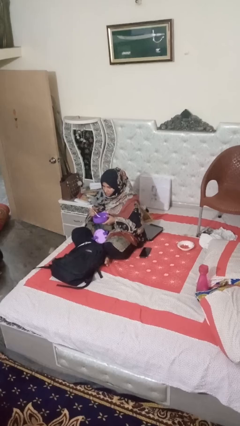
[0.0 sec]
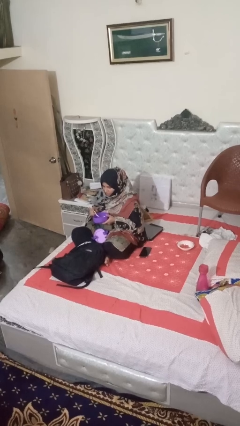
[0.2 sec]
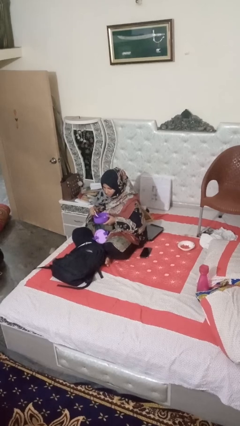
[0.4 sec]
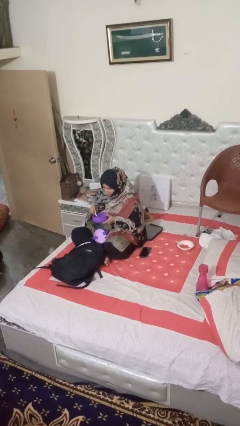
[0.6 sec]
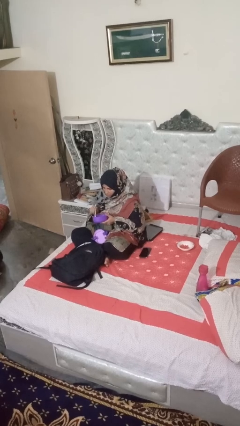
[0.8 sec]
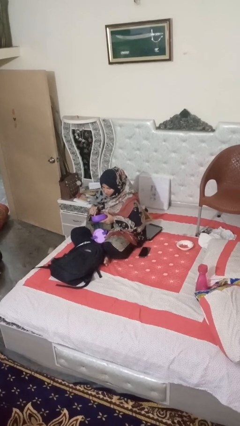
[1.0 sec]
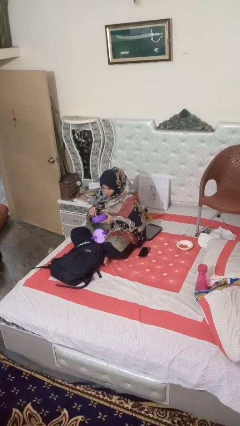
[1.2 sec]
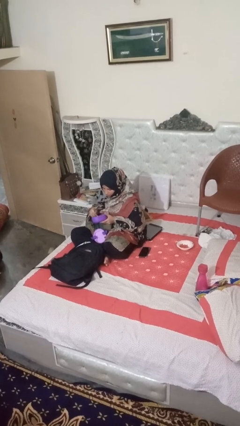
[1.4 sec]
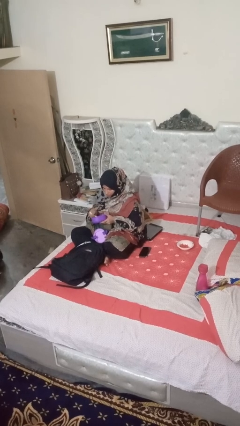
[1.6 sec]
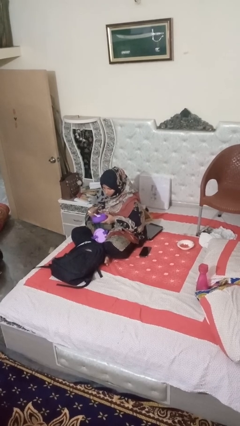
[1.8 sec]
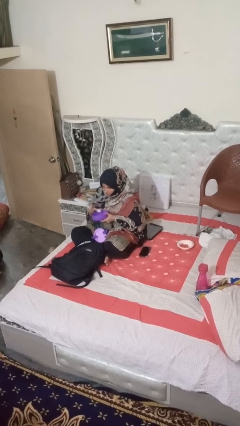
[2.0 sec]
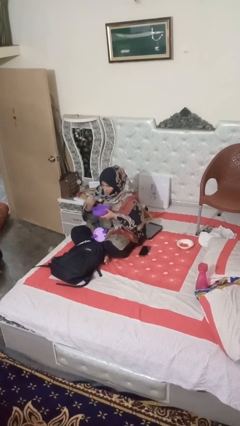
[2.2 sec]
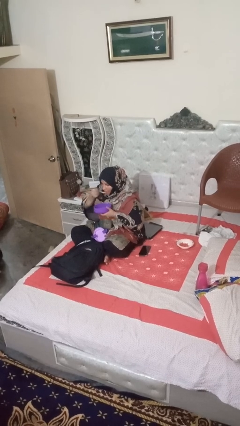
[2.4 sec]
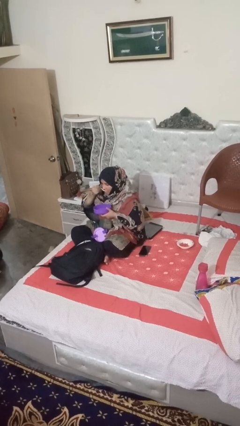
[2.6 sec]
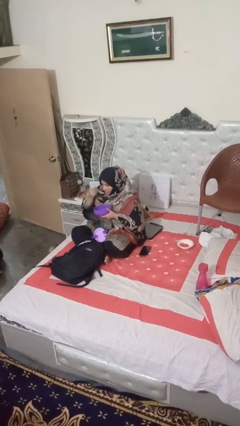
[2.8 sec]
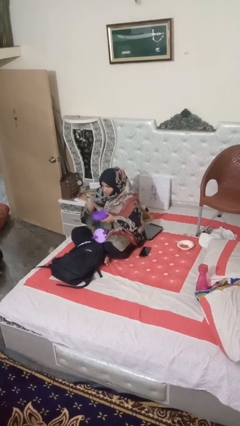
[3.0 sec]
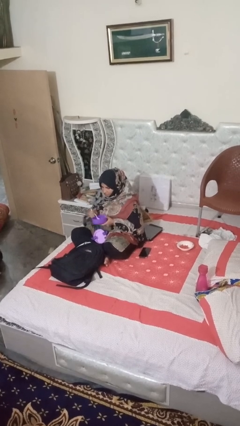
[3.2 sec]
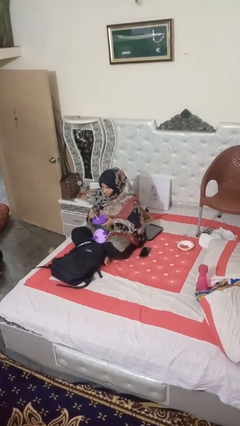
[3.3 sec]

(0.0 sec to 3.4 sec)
person eats snack from bag

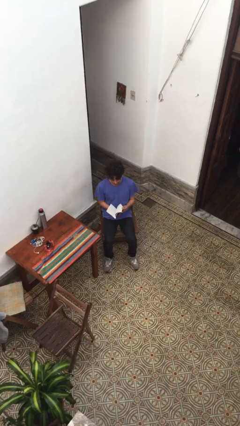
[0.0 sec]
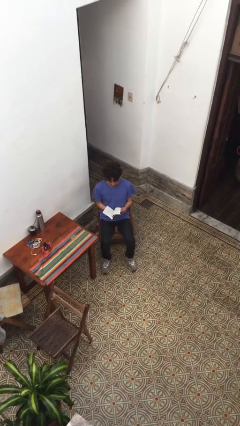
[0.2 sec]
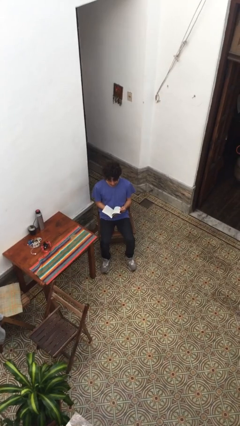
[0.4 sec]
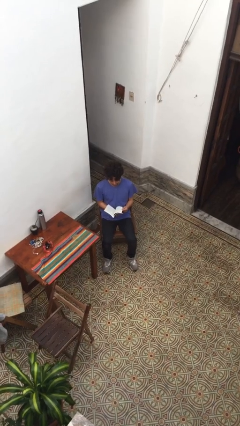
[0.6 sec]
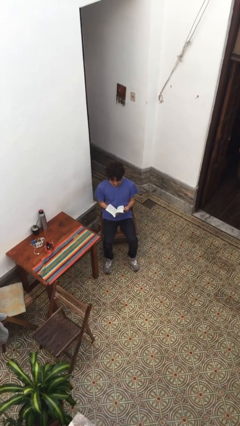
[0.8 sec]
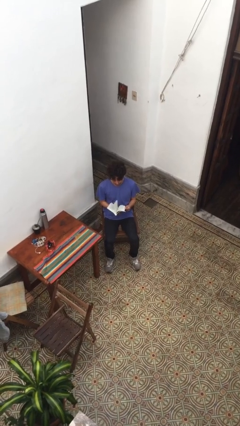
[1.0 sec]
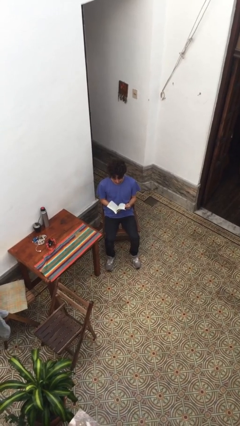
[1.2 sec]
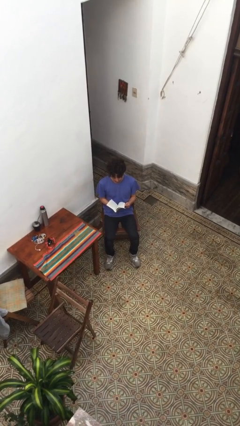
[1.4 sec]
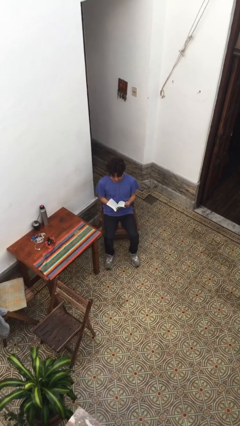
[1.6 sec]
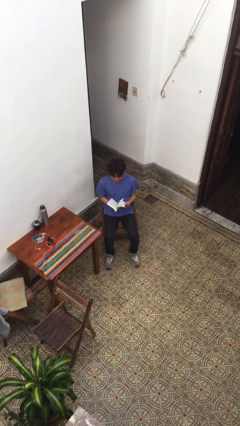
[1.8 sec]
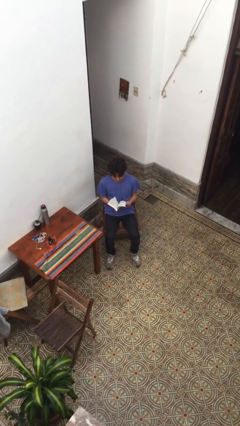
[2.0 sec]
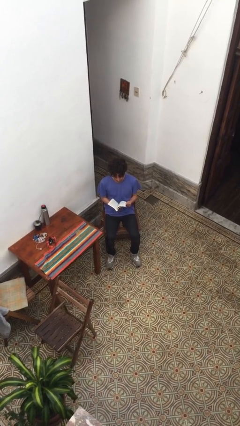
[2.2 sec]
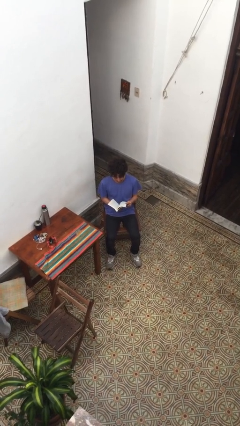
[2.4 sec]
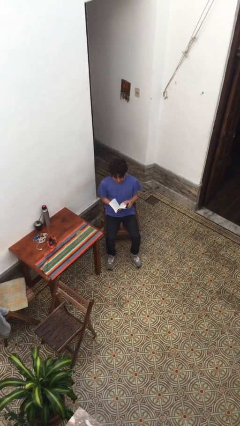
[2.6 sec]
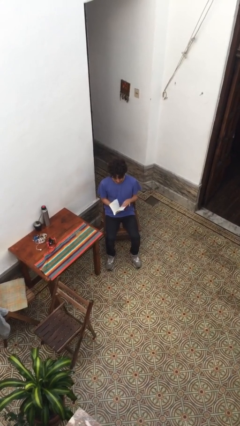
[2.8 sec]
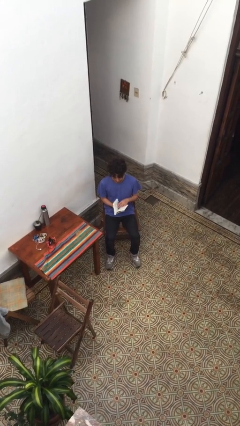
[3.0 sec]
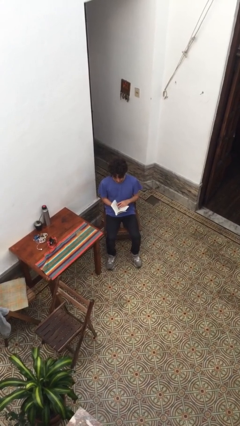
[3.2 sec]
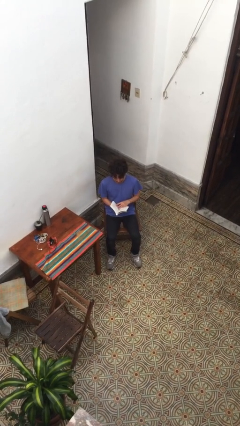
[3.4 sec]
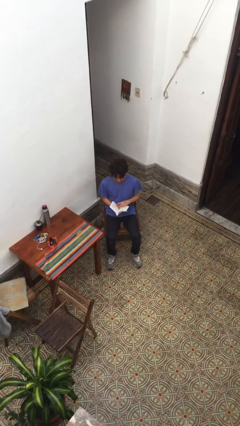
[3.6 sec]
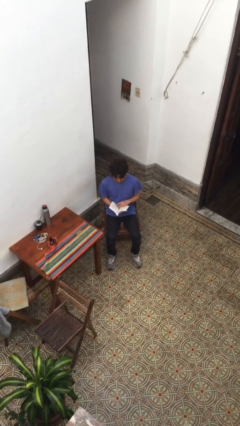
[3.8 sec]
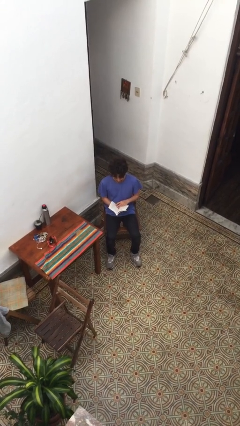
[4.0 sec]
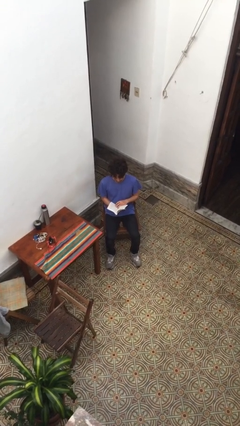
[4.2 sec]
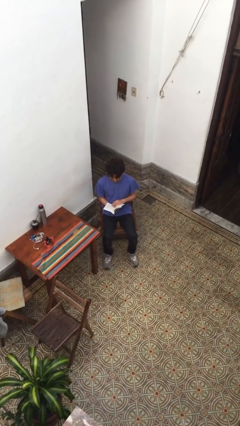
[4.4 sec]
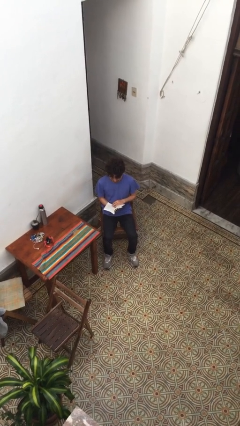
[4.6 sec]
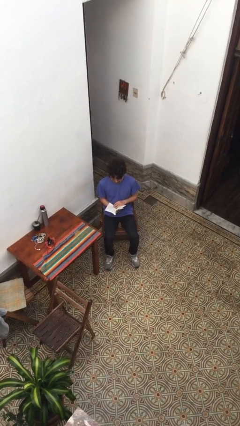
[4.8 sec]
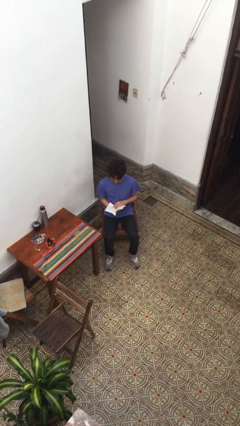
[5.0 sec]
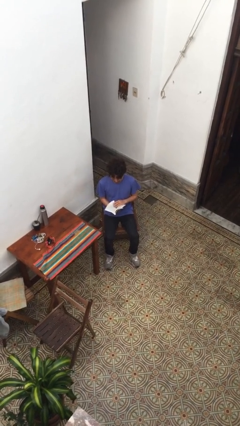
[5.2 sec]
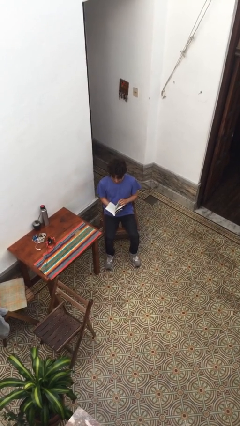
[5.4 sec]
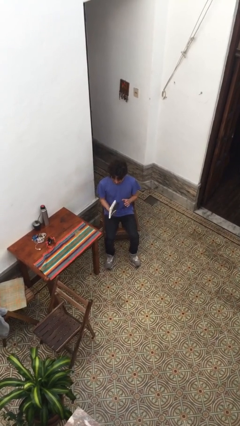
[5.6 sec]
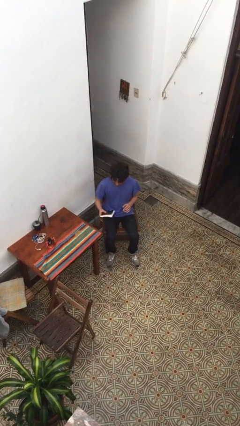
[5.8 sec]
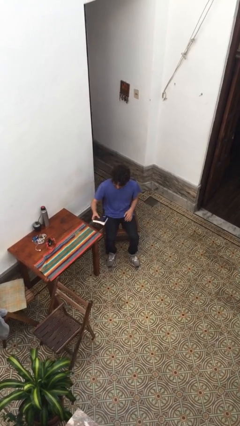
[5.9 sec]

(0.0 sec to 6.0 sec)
person reads document

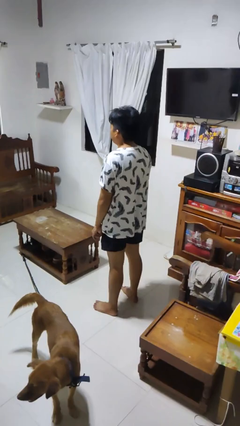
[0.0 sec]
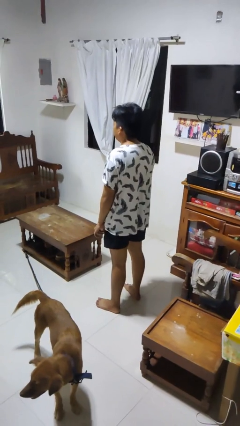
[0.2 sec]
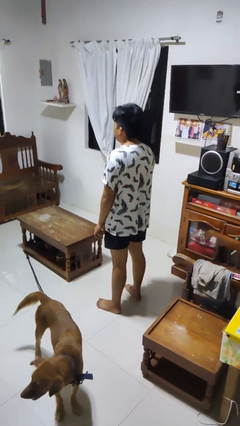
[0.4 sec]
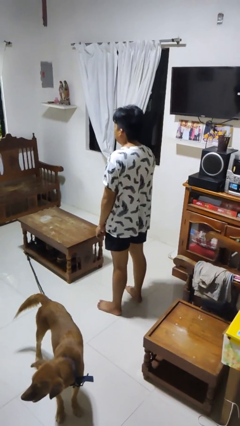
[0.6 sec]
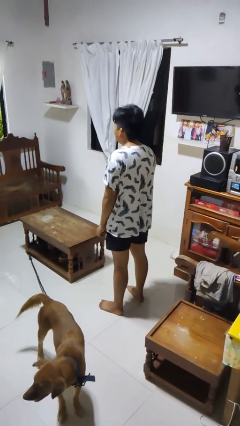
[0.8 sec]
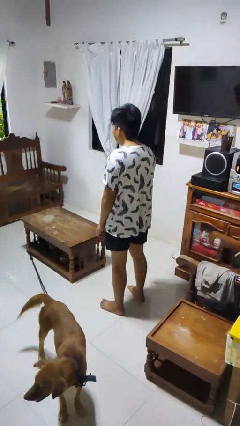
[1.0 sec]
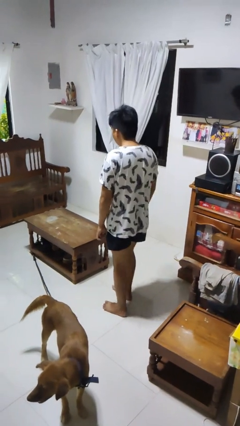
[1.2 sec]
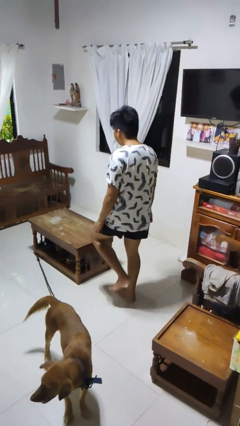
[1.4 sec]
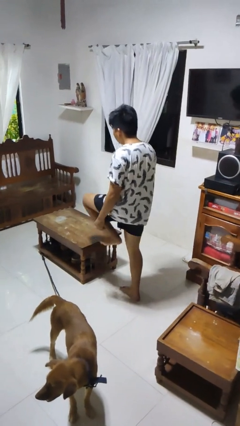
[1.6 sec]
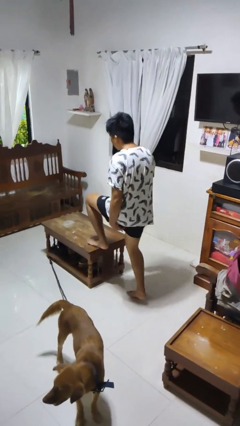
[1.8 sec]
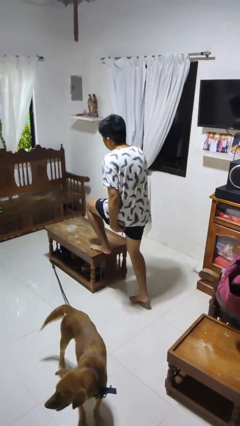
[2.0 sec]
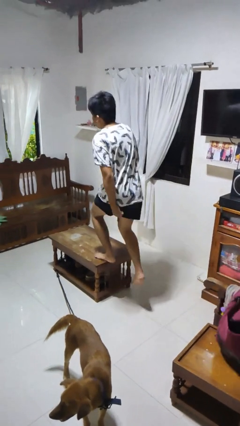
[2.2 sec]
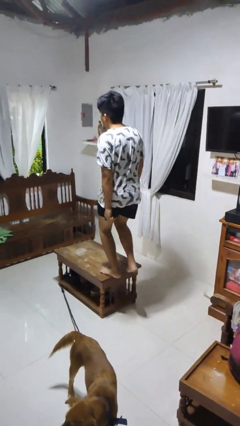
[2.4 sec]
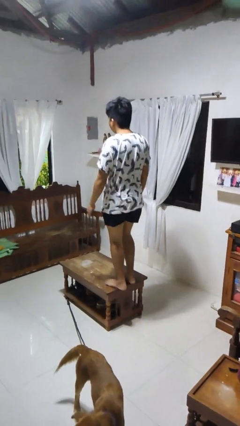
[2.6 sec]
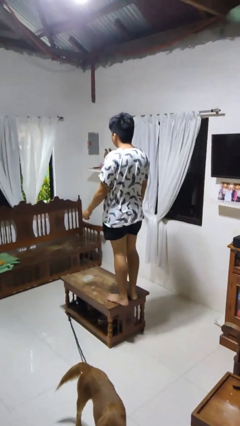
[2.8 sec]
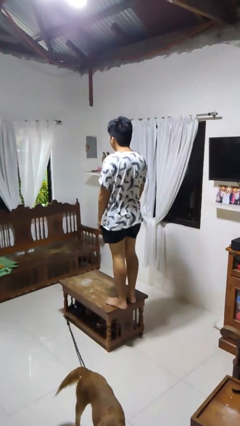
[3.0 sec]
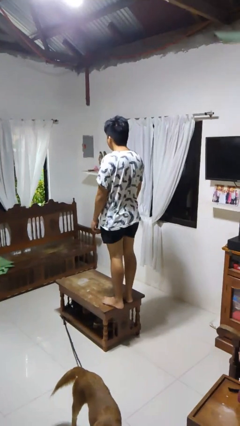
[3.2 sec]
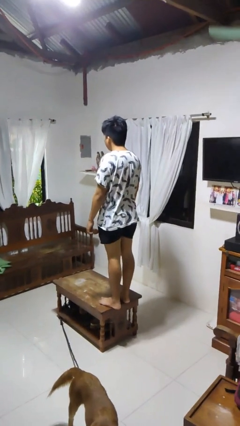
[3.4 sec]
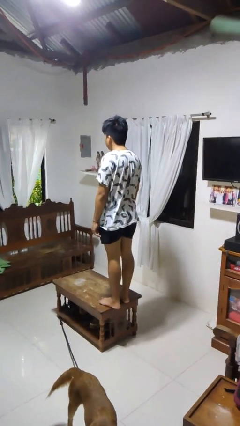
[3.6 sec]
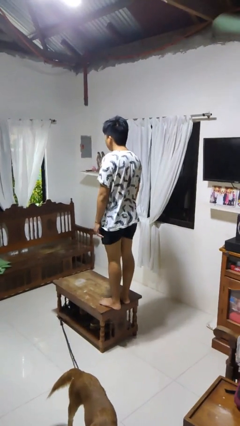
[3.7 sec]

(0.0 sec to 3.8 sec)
person climbs on table

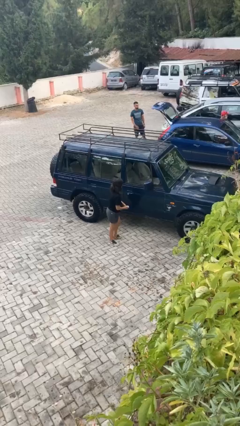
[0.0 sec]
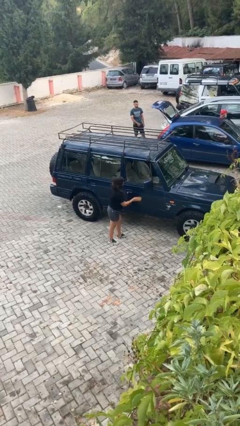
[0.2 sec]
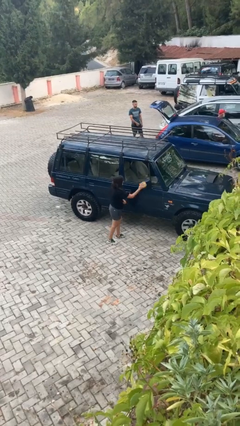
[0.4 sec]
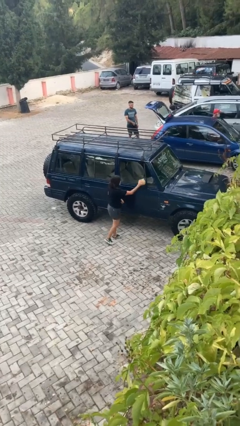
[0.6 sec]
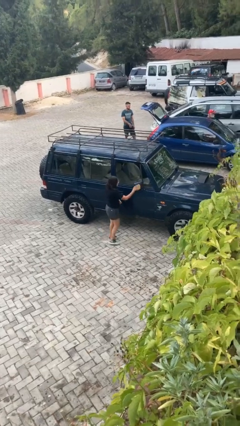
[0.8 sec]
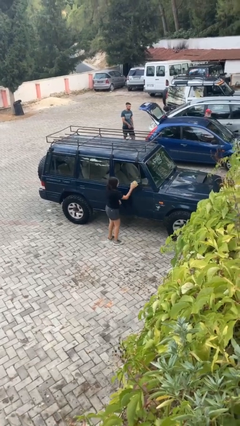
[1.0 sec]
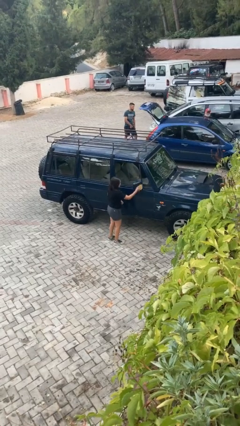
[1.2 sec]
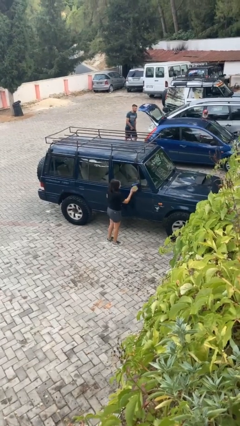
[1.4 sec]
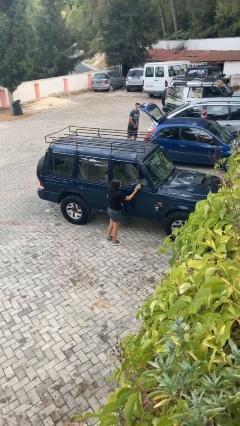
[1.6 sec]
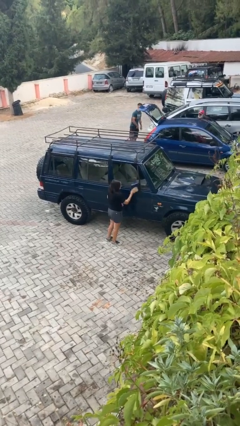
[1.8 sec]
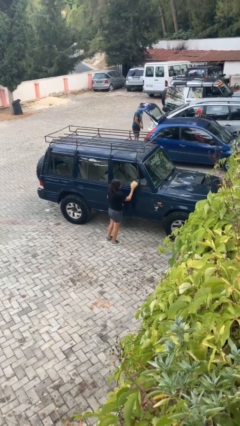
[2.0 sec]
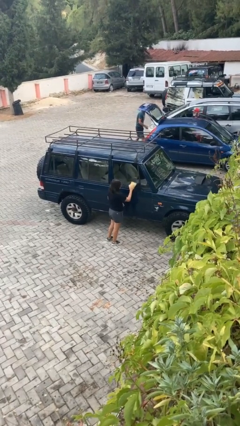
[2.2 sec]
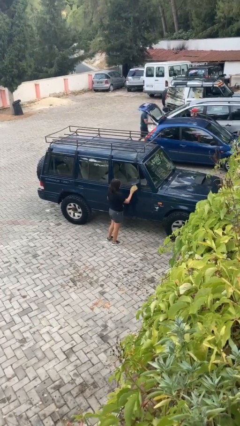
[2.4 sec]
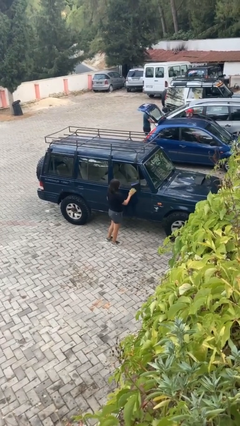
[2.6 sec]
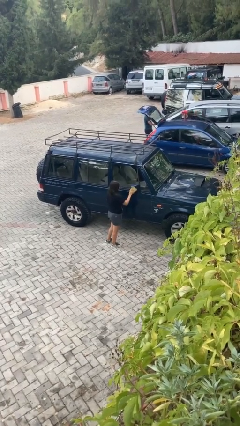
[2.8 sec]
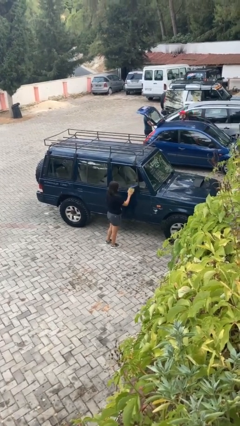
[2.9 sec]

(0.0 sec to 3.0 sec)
person polishes car with rag

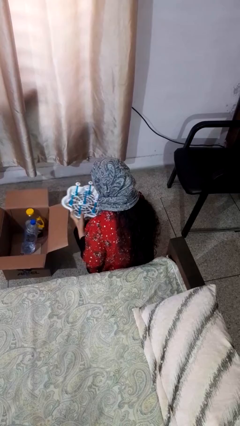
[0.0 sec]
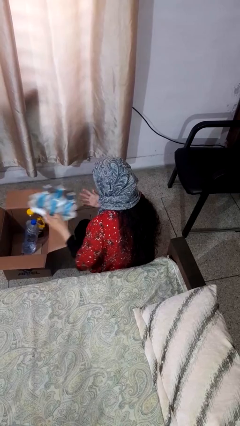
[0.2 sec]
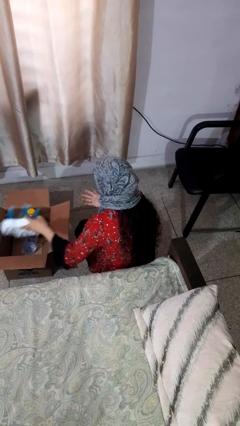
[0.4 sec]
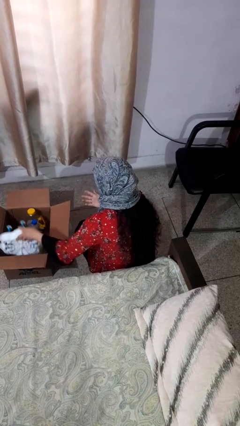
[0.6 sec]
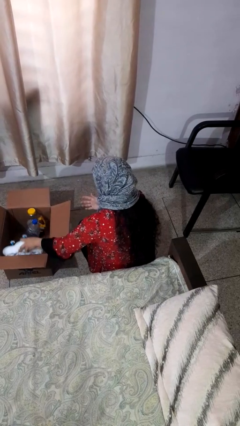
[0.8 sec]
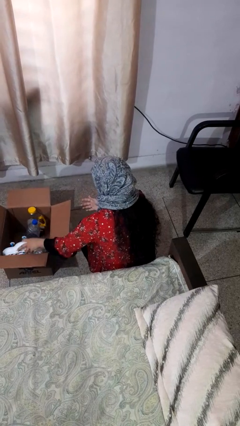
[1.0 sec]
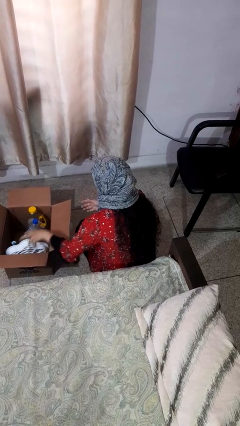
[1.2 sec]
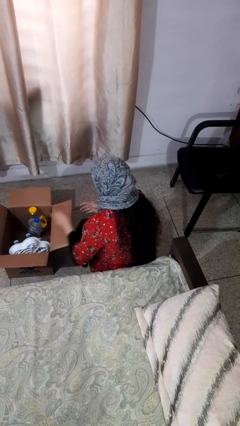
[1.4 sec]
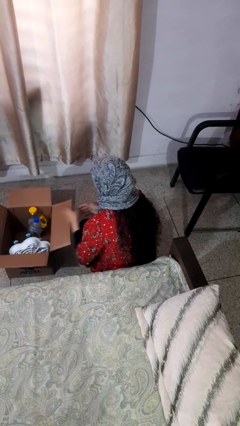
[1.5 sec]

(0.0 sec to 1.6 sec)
person puts object into box
